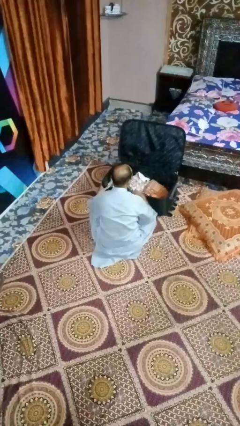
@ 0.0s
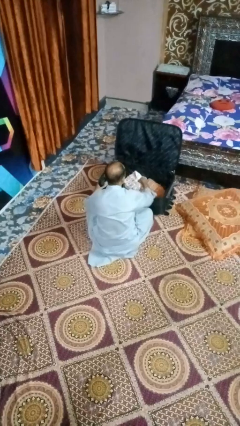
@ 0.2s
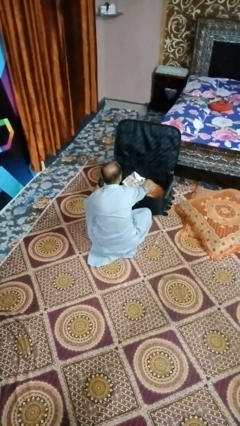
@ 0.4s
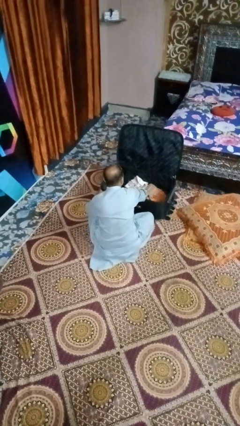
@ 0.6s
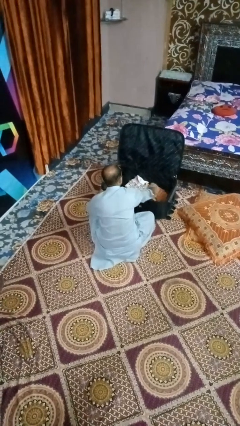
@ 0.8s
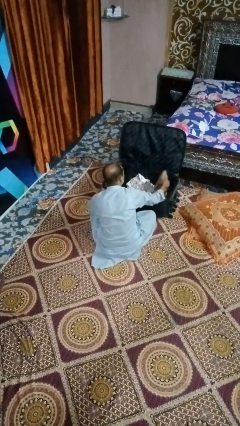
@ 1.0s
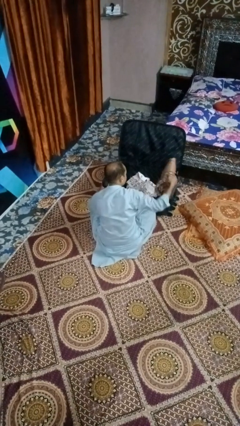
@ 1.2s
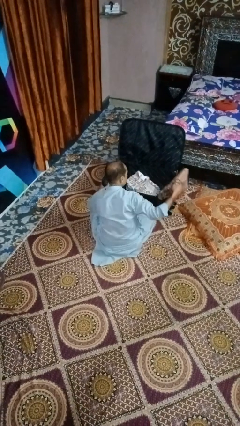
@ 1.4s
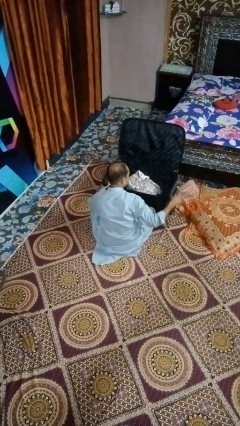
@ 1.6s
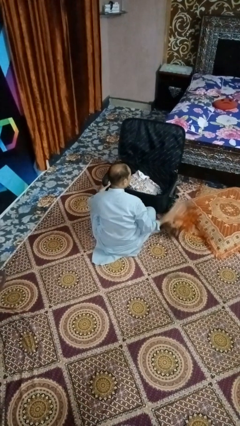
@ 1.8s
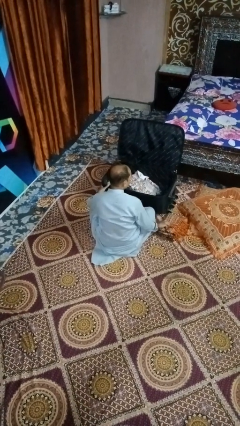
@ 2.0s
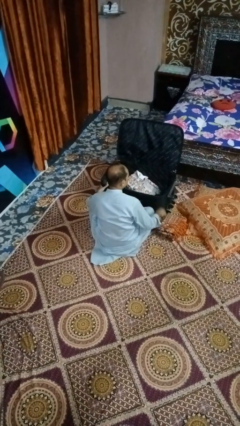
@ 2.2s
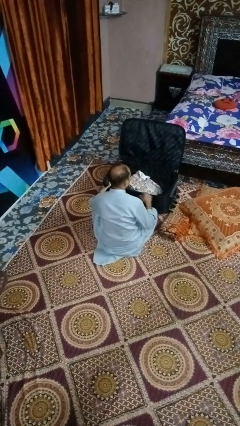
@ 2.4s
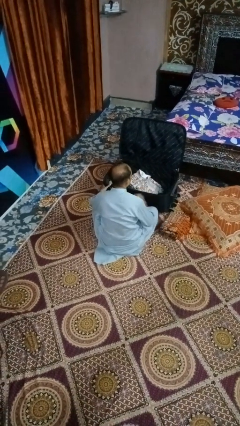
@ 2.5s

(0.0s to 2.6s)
person unloads clothes from suitcase

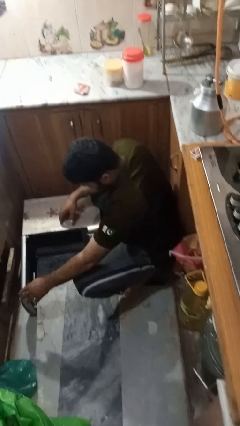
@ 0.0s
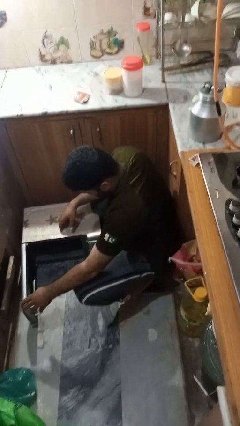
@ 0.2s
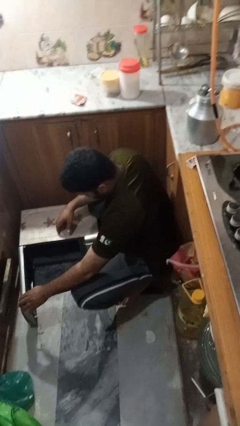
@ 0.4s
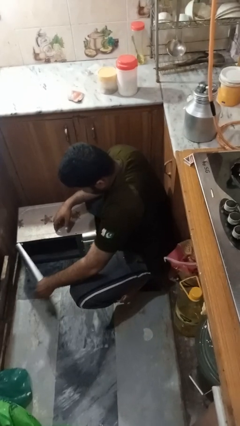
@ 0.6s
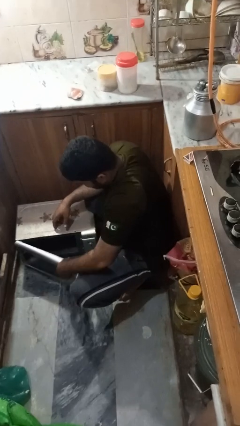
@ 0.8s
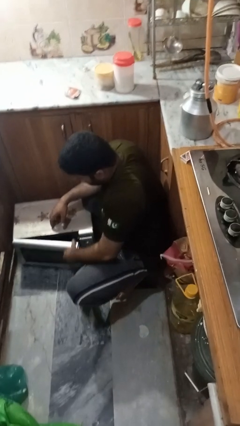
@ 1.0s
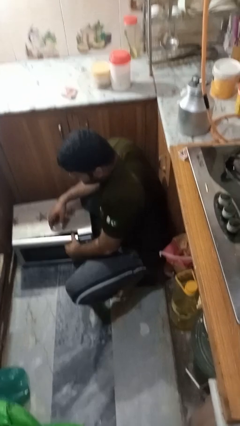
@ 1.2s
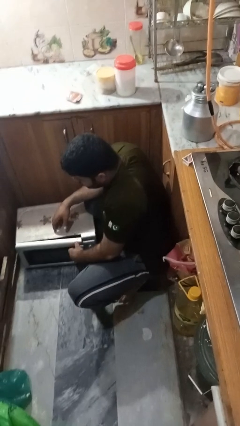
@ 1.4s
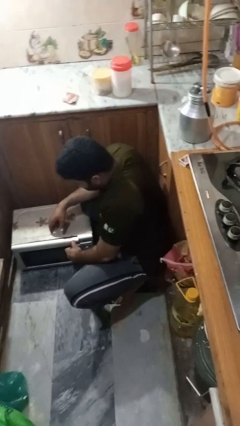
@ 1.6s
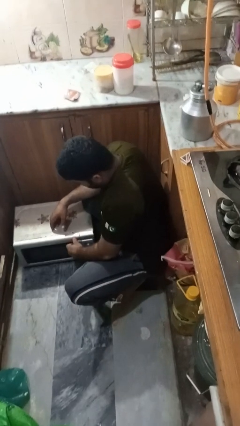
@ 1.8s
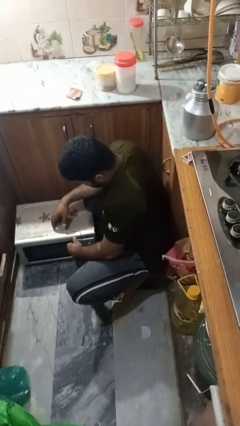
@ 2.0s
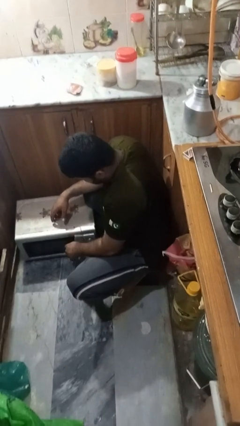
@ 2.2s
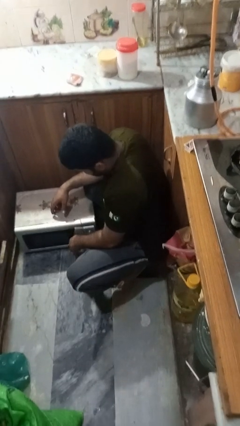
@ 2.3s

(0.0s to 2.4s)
person closes oven door

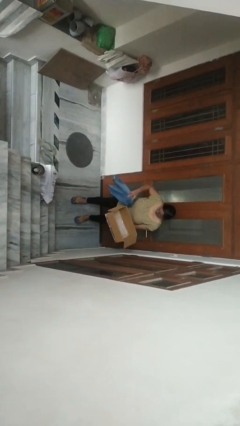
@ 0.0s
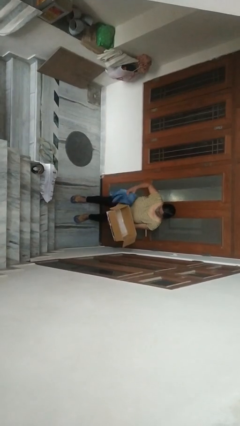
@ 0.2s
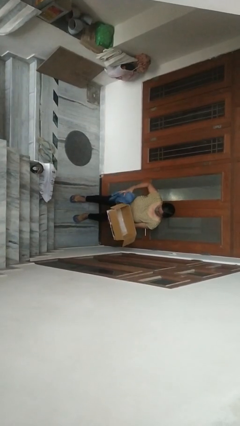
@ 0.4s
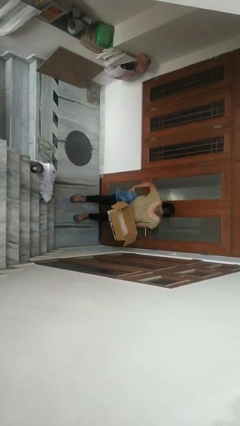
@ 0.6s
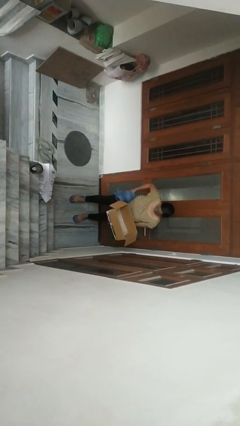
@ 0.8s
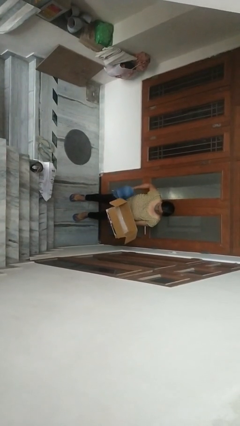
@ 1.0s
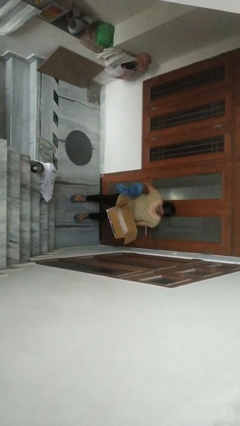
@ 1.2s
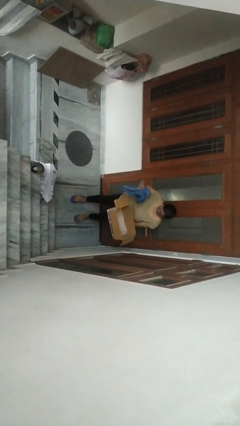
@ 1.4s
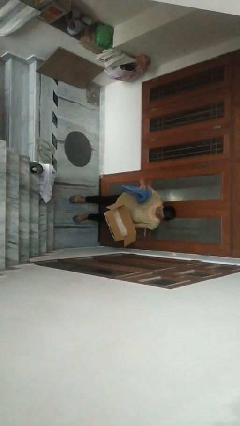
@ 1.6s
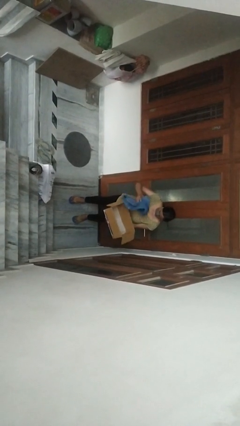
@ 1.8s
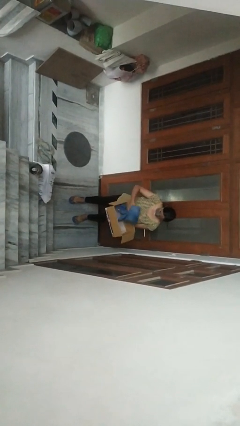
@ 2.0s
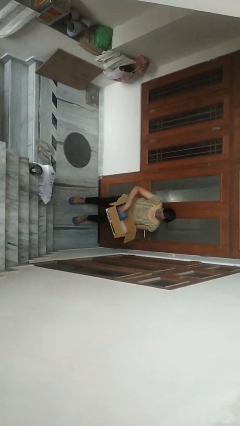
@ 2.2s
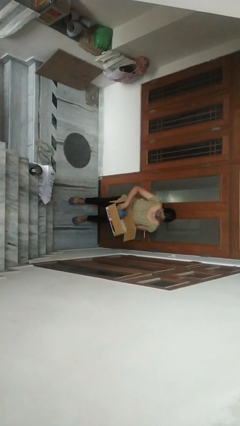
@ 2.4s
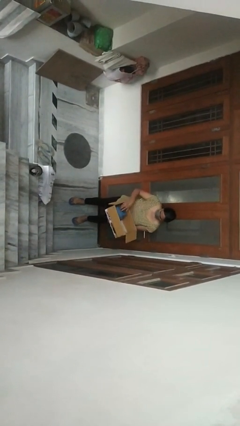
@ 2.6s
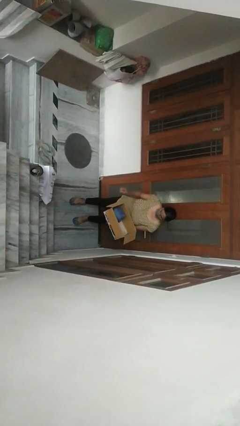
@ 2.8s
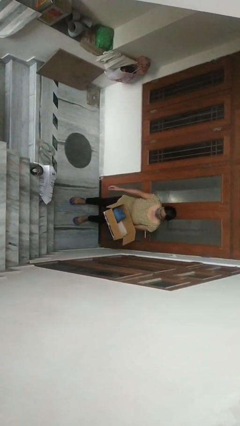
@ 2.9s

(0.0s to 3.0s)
person puts object into box

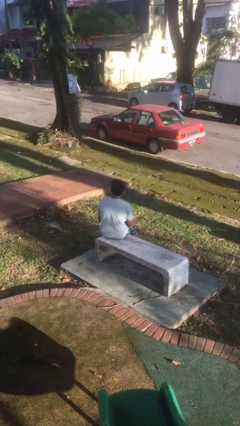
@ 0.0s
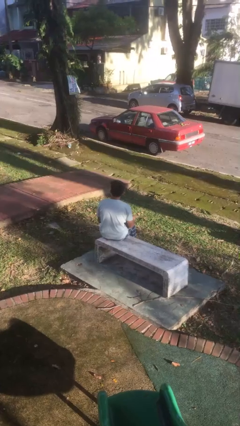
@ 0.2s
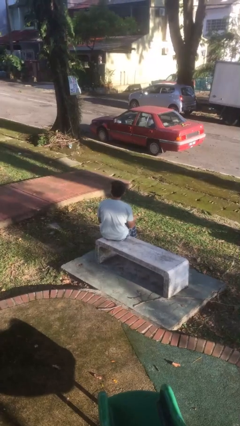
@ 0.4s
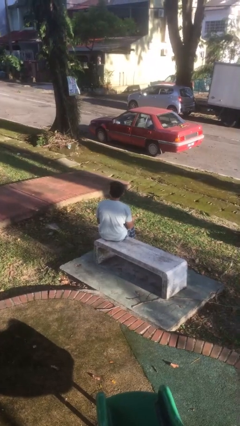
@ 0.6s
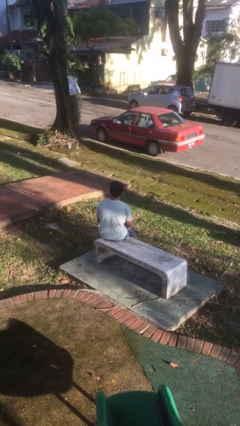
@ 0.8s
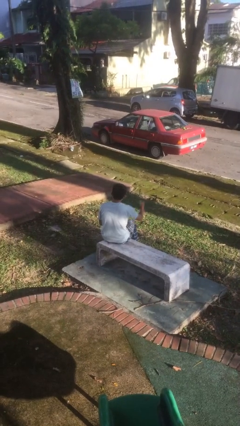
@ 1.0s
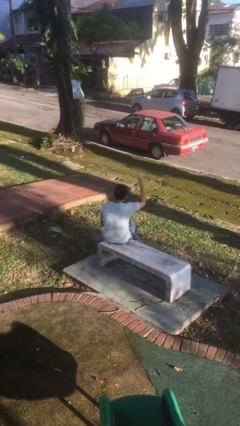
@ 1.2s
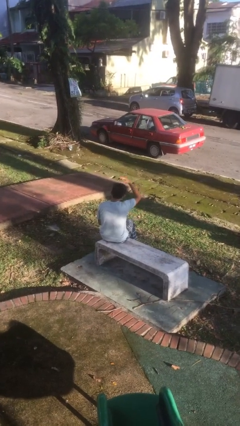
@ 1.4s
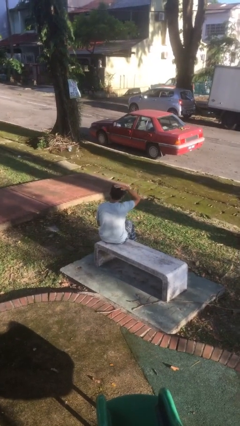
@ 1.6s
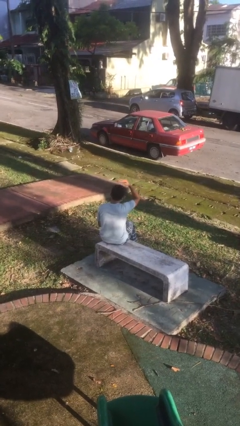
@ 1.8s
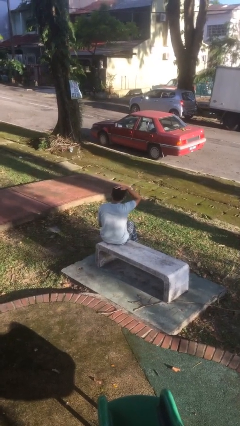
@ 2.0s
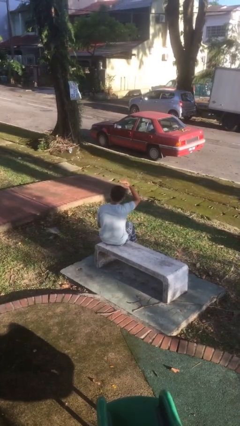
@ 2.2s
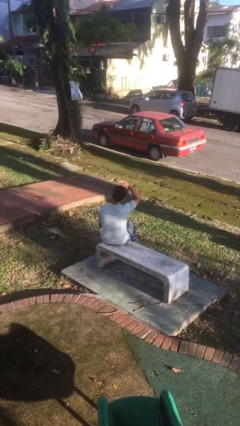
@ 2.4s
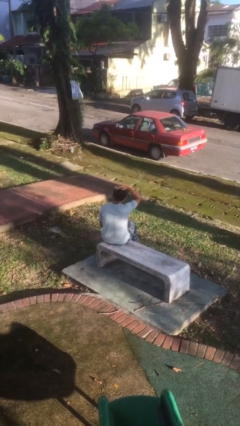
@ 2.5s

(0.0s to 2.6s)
person pats head

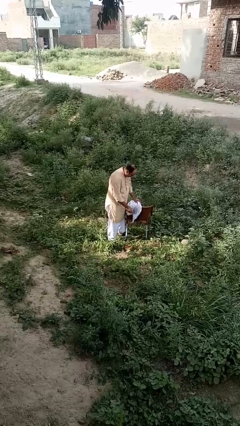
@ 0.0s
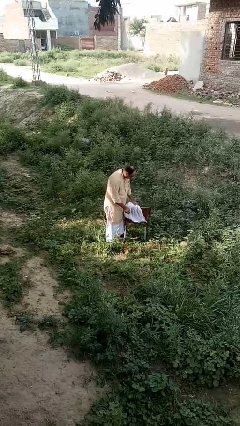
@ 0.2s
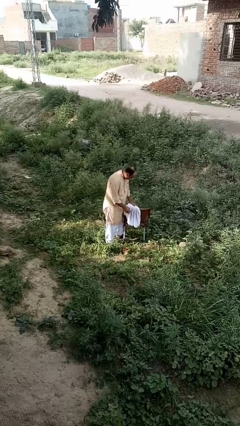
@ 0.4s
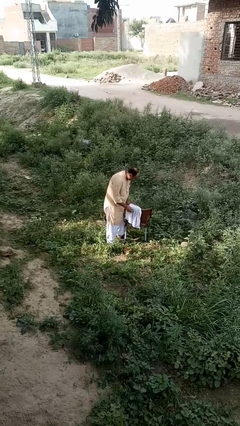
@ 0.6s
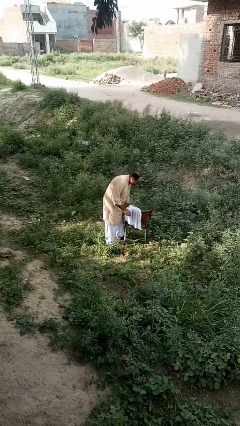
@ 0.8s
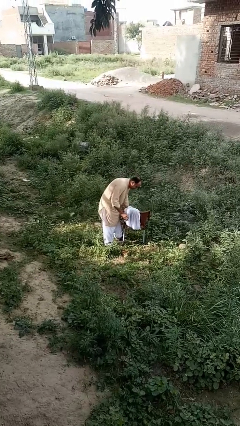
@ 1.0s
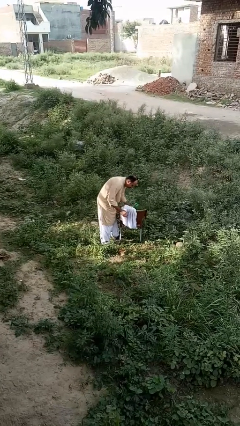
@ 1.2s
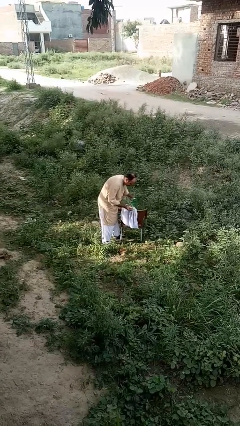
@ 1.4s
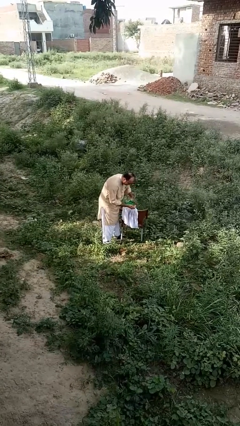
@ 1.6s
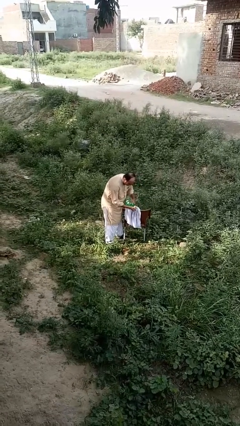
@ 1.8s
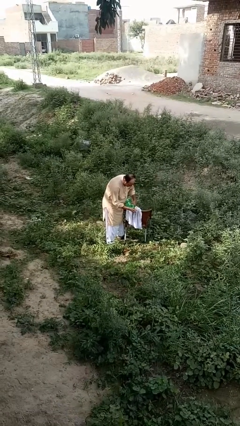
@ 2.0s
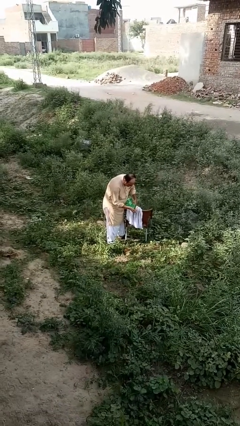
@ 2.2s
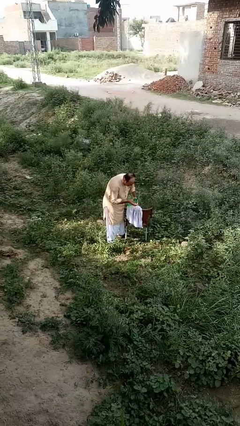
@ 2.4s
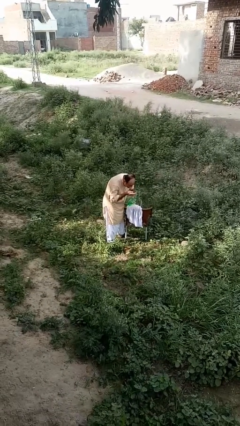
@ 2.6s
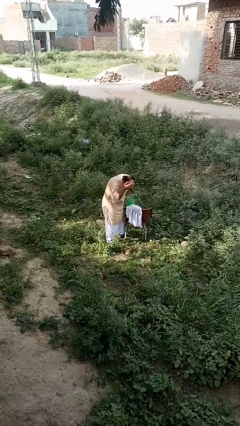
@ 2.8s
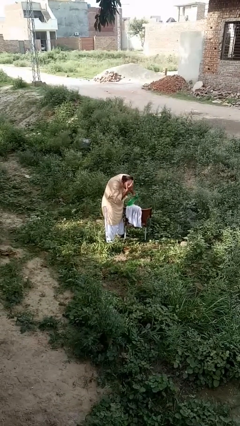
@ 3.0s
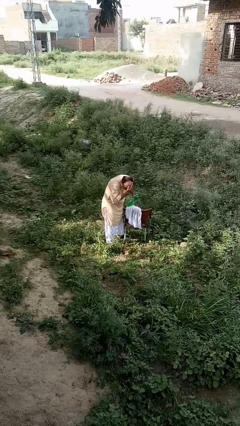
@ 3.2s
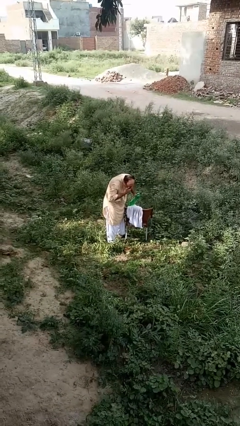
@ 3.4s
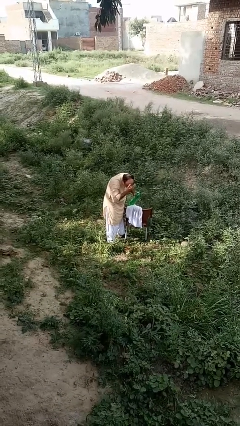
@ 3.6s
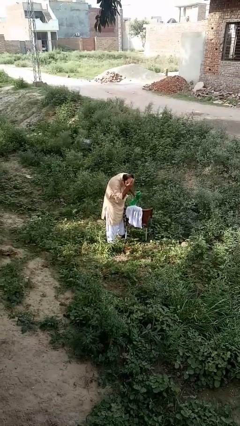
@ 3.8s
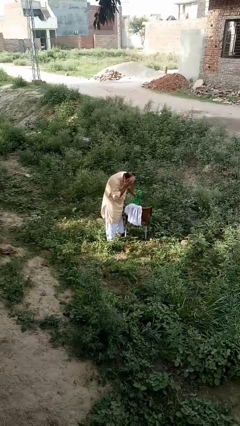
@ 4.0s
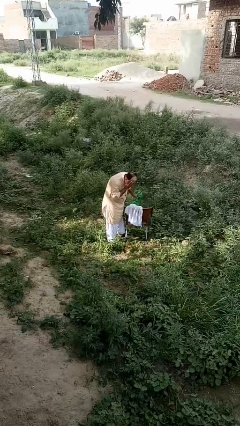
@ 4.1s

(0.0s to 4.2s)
person washes face

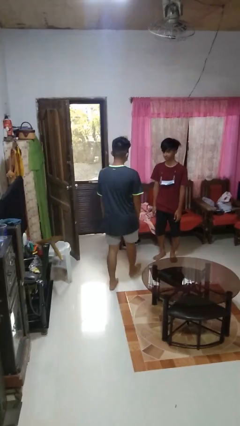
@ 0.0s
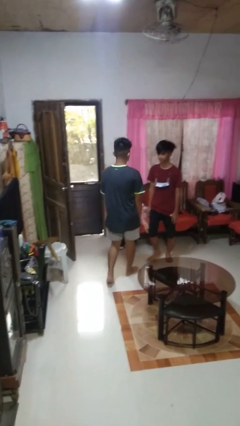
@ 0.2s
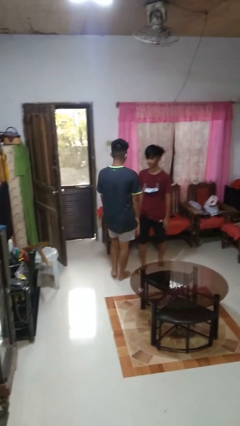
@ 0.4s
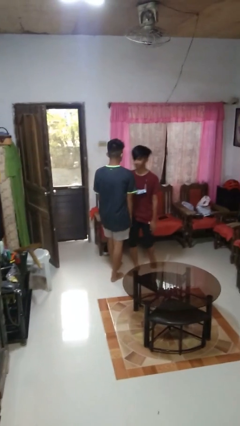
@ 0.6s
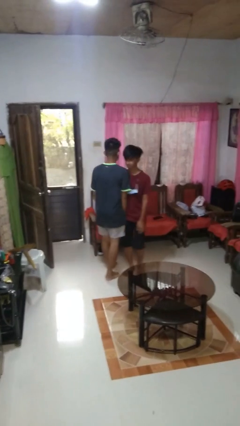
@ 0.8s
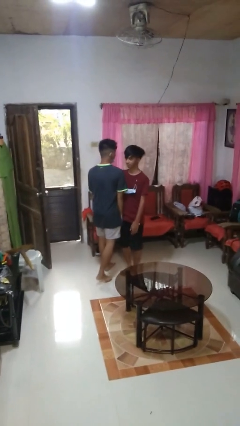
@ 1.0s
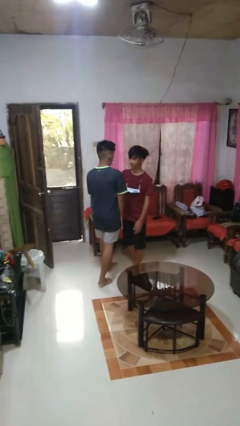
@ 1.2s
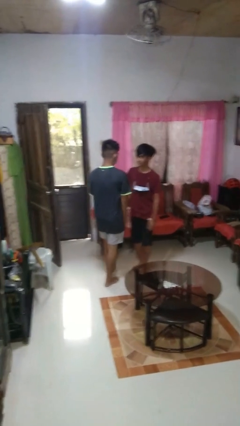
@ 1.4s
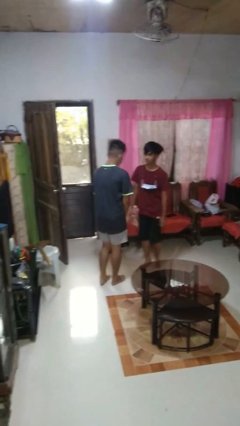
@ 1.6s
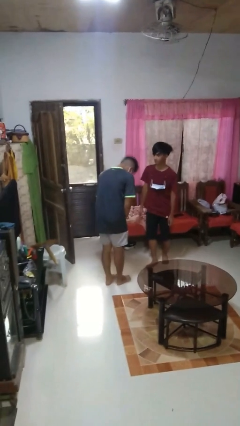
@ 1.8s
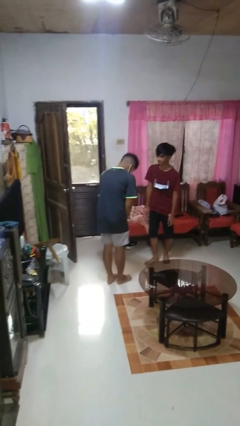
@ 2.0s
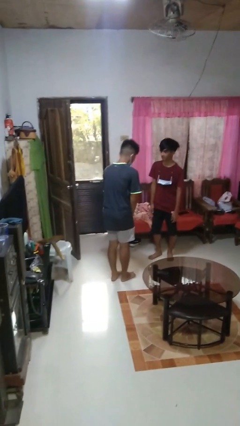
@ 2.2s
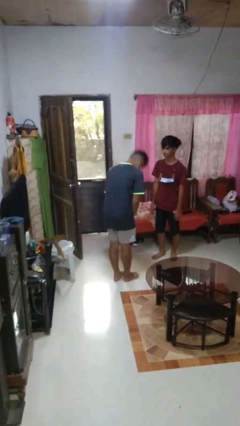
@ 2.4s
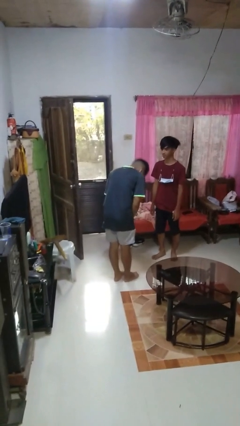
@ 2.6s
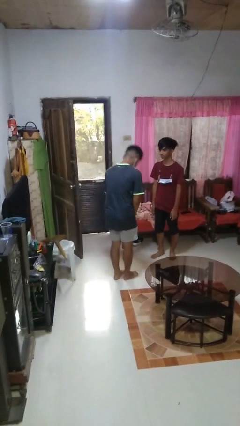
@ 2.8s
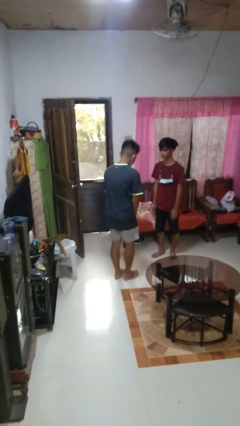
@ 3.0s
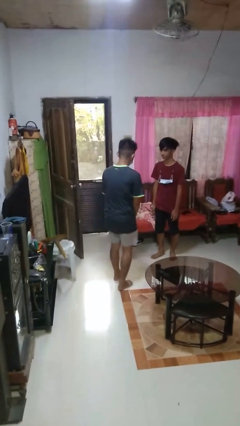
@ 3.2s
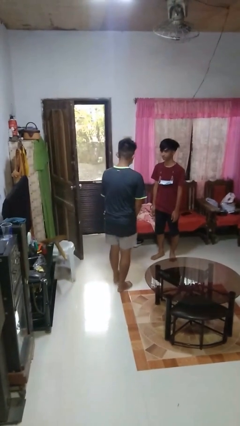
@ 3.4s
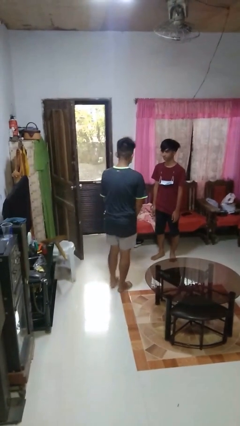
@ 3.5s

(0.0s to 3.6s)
person bumps into person
